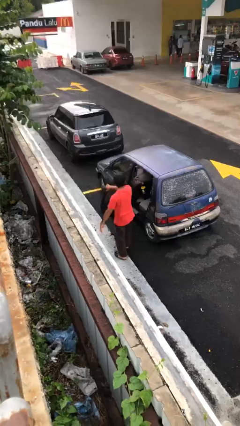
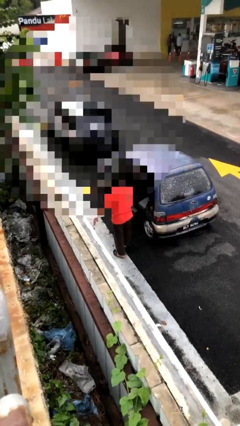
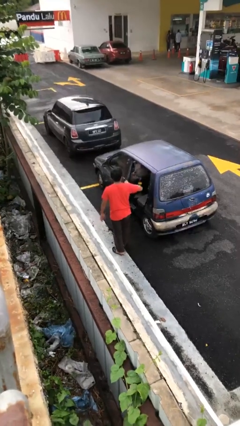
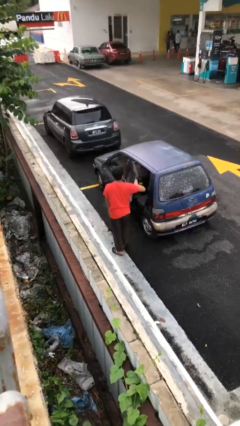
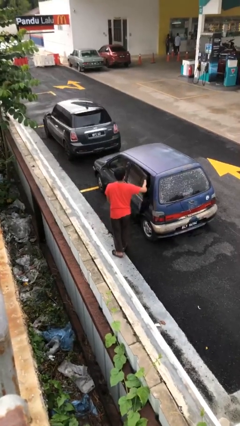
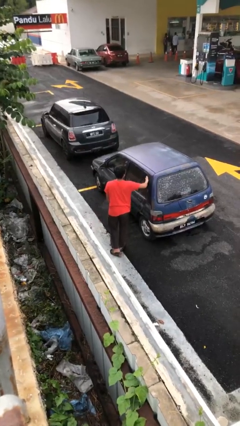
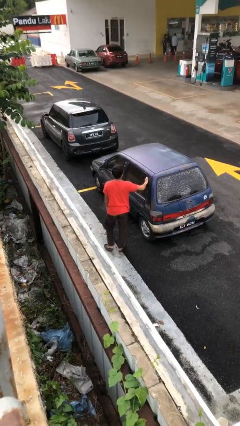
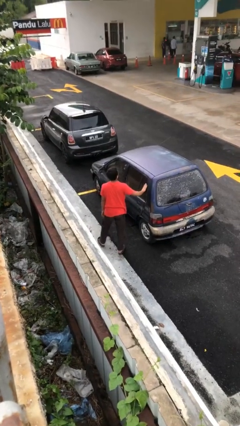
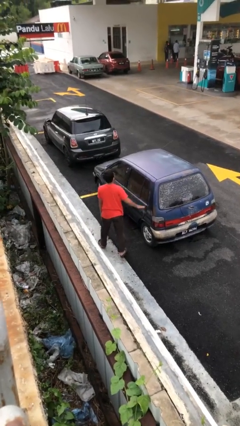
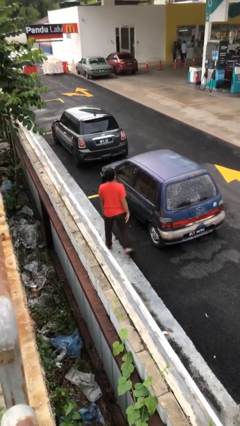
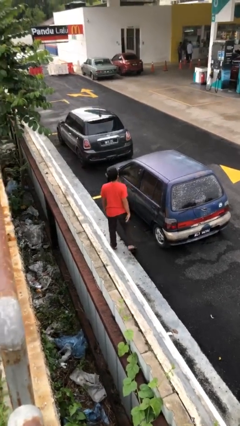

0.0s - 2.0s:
person closes car door

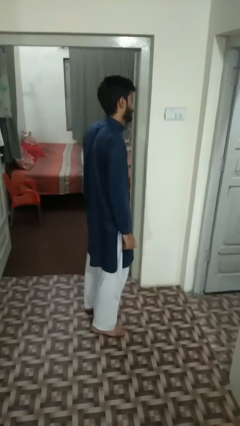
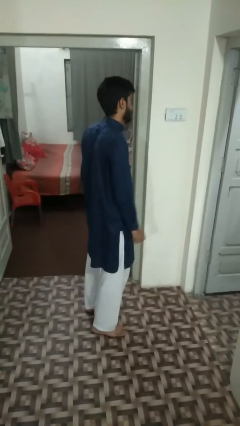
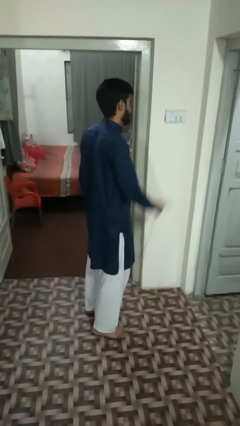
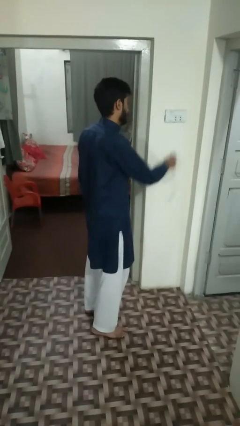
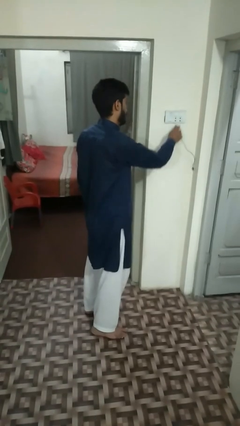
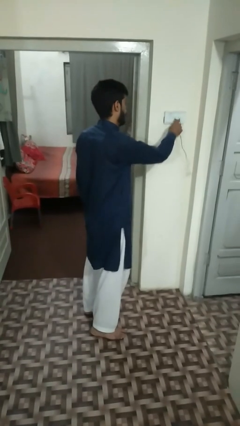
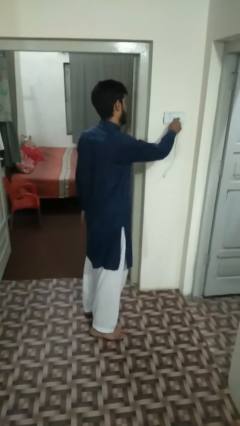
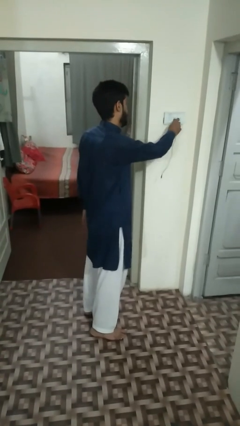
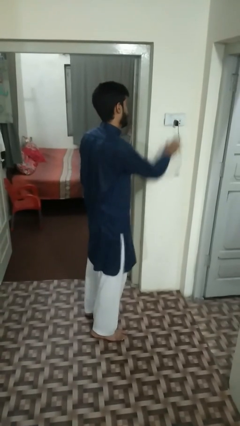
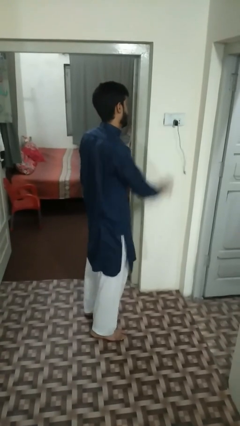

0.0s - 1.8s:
person plugs into electrical socket

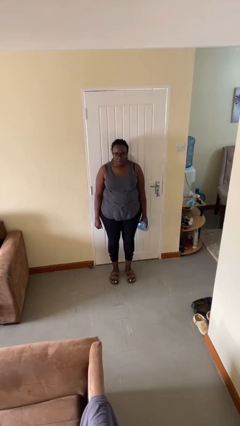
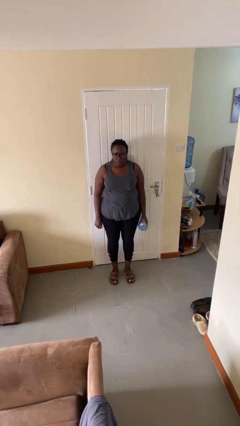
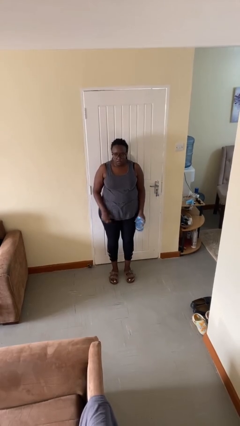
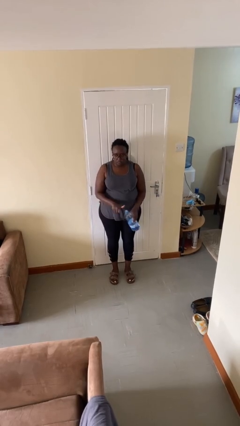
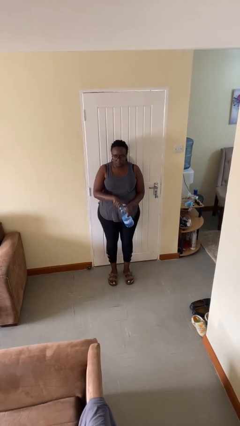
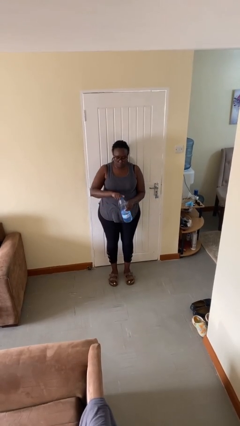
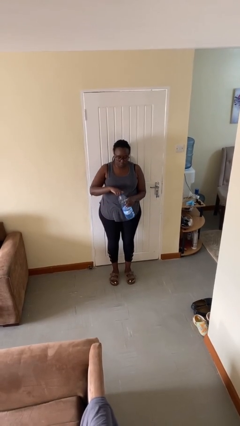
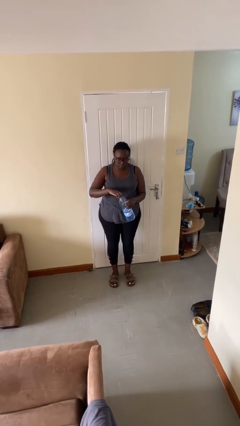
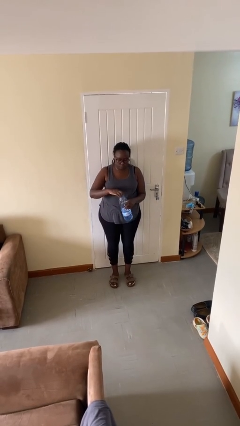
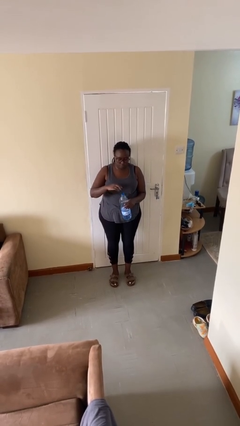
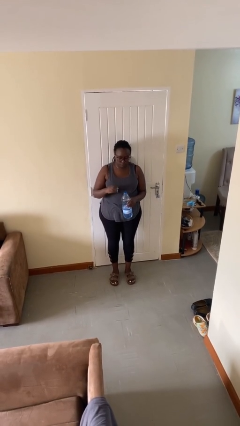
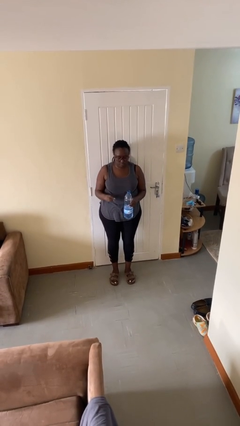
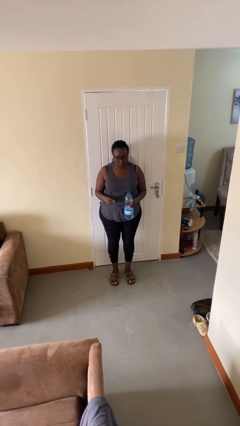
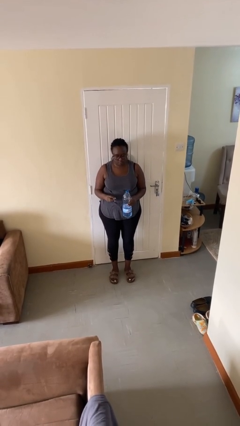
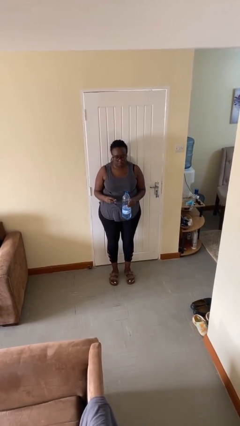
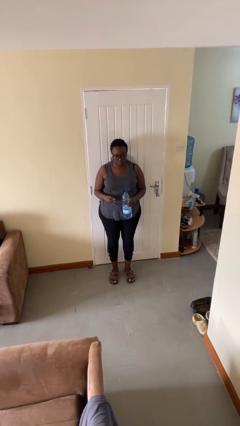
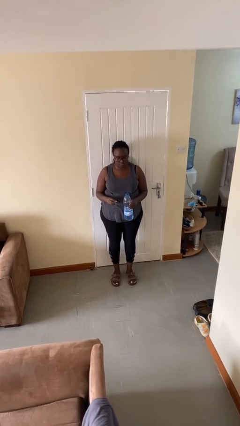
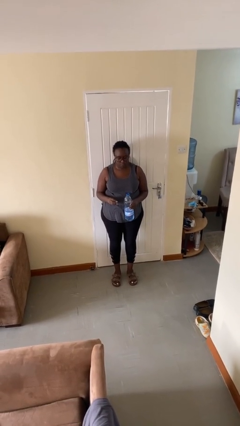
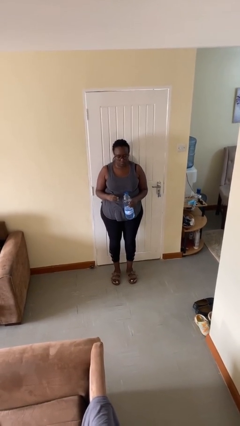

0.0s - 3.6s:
person unscrews lid from bottle

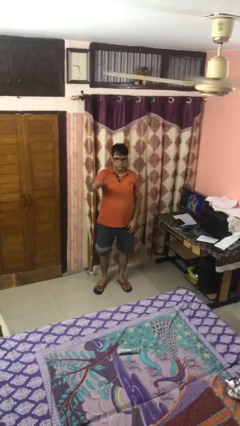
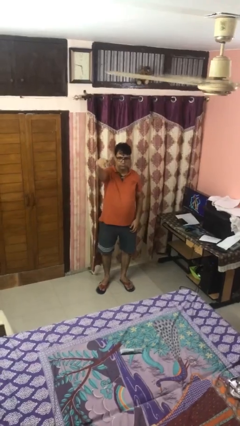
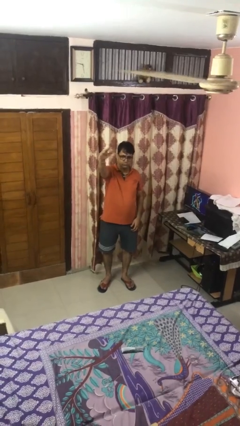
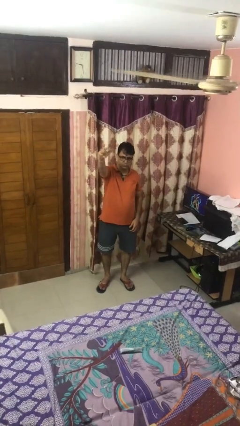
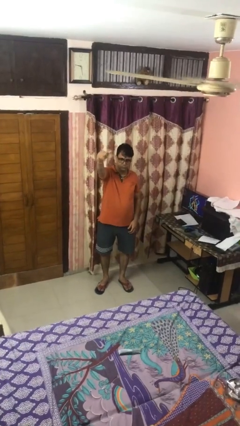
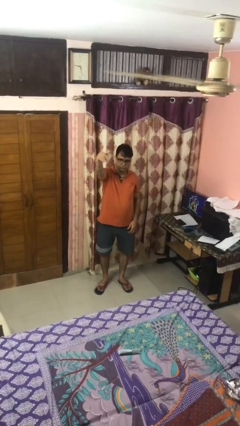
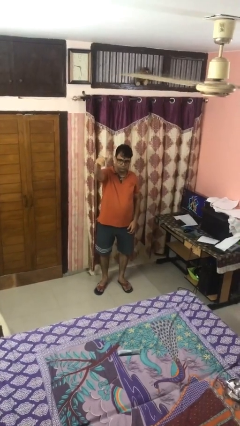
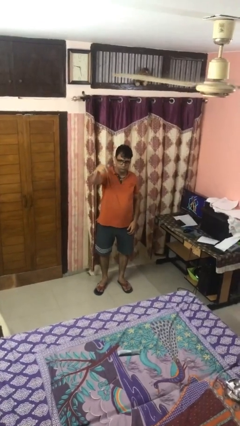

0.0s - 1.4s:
person gestures come here

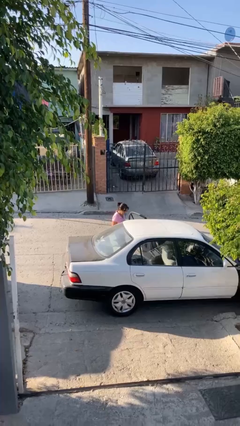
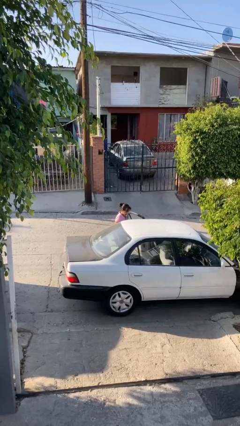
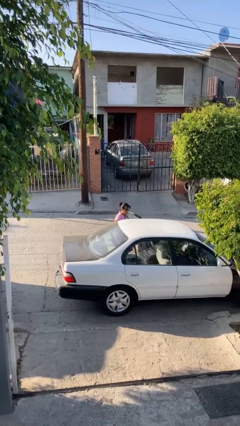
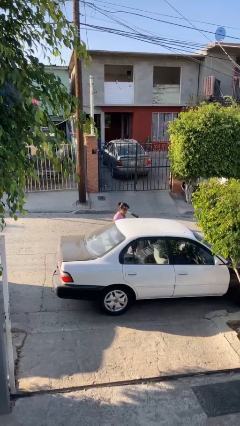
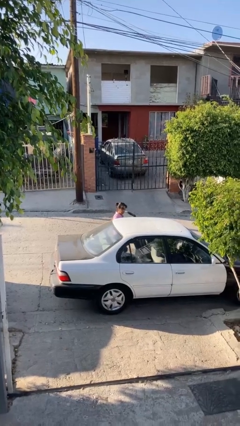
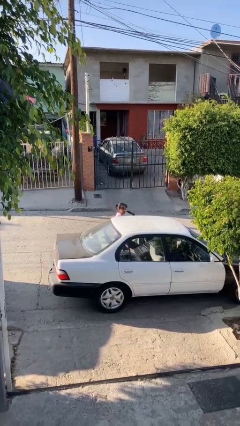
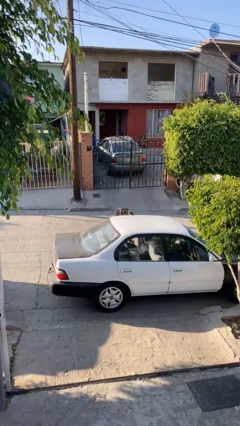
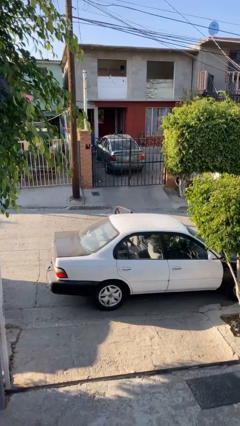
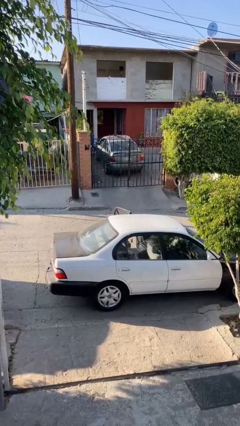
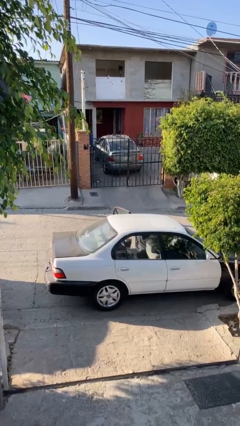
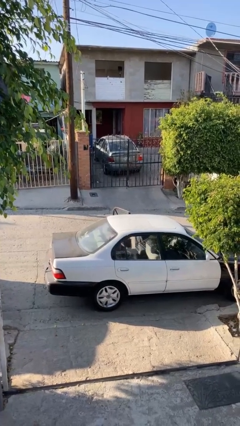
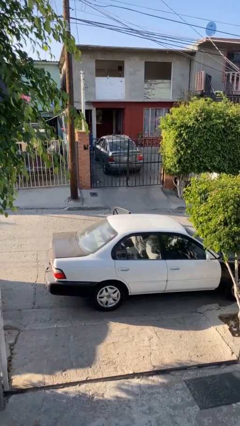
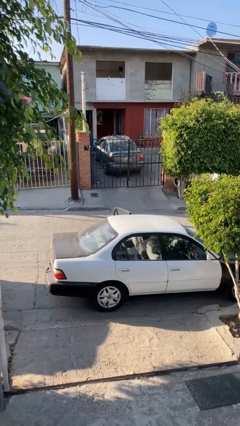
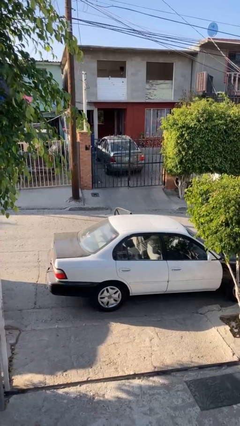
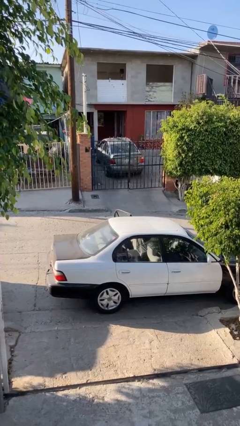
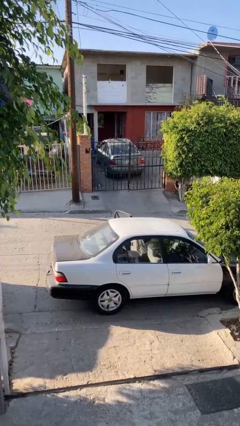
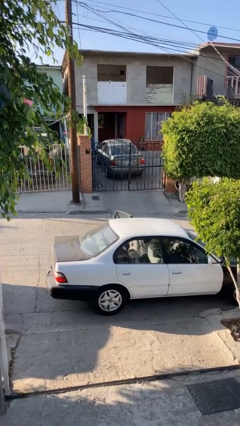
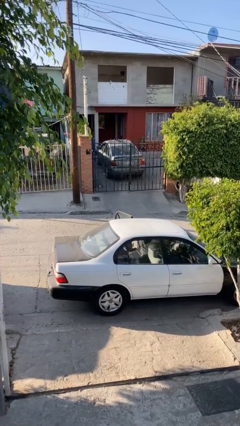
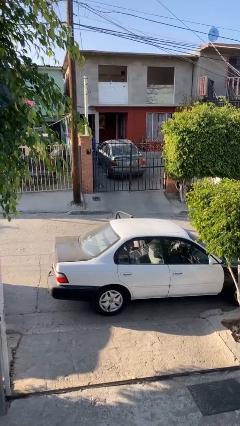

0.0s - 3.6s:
person enters car

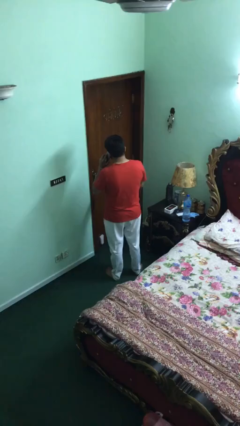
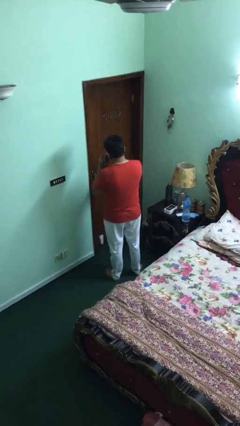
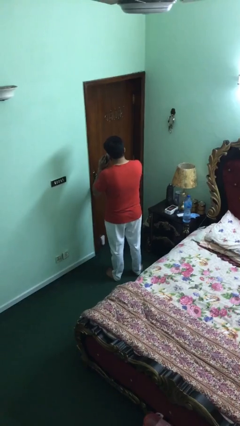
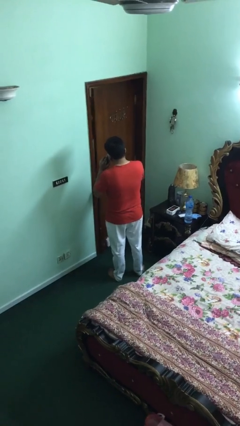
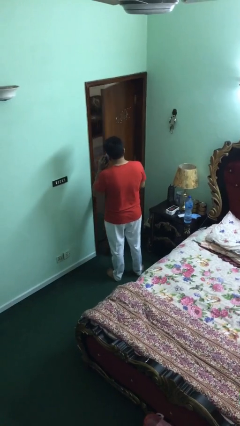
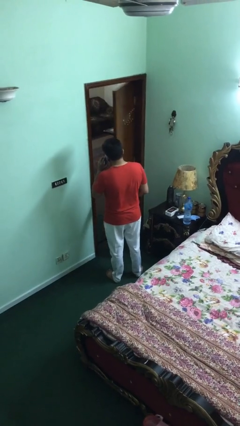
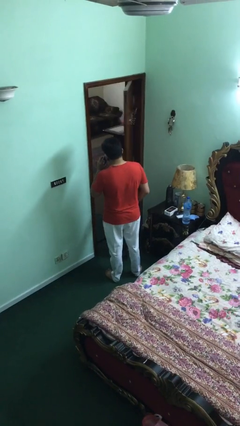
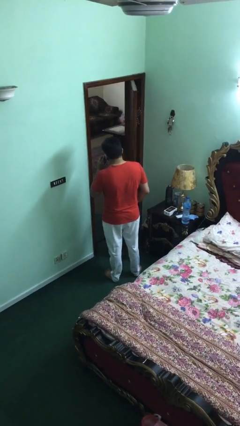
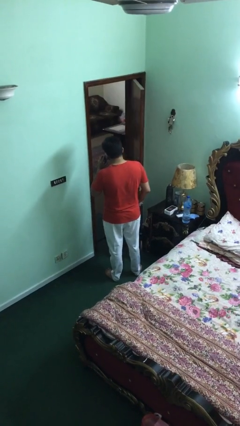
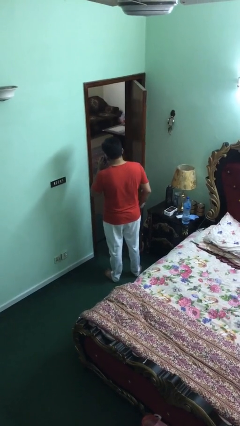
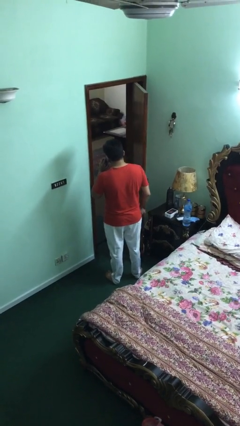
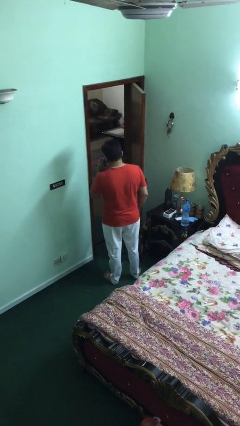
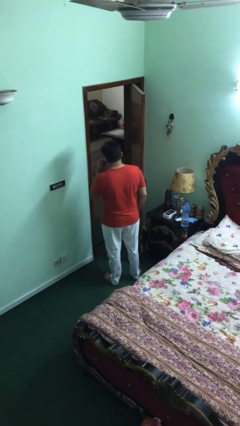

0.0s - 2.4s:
person opens facility door

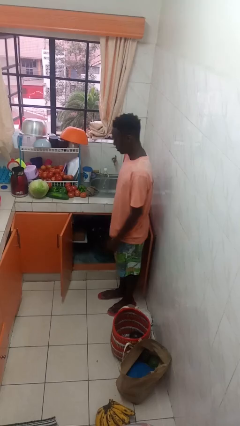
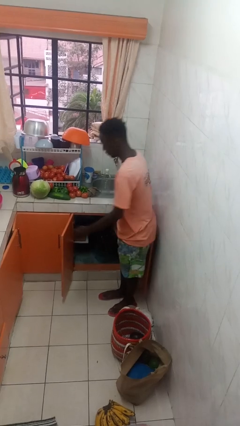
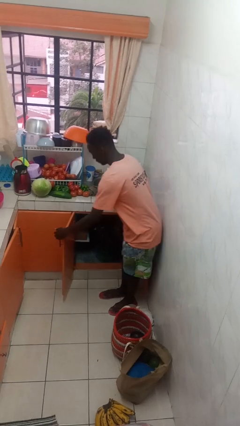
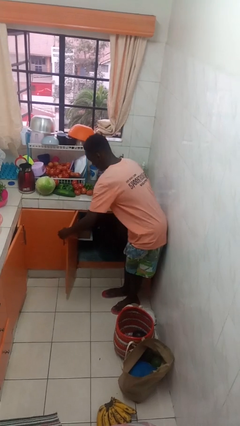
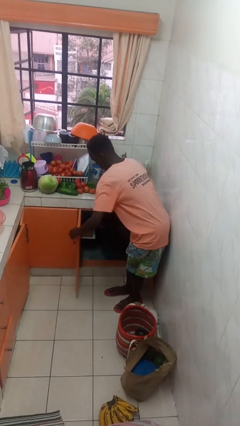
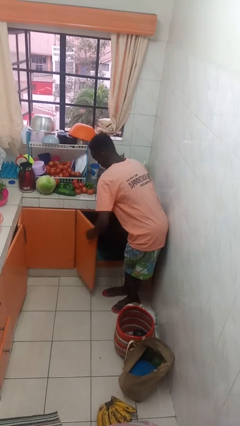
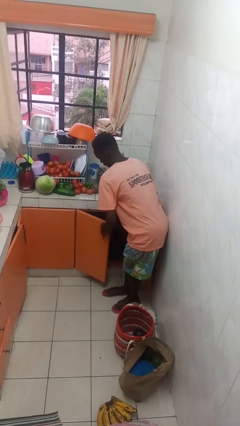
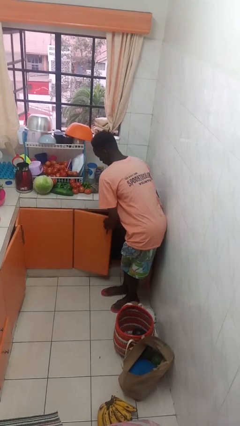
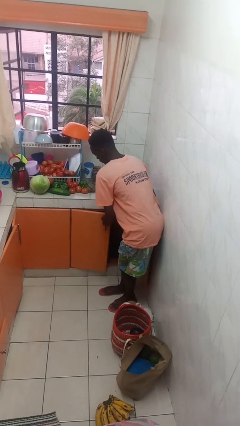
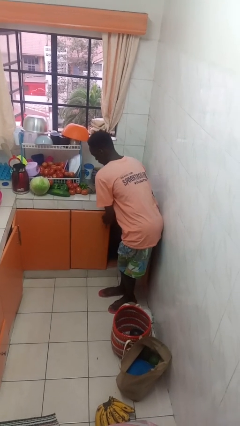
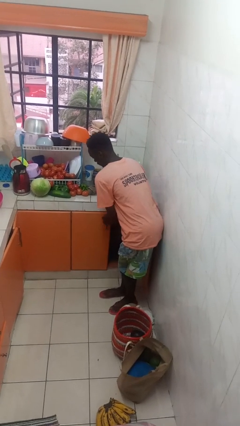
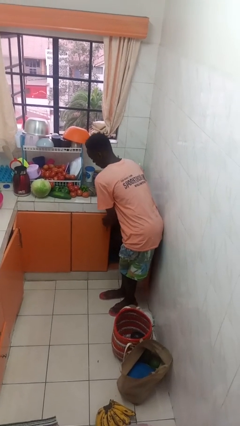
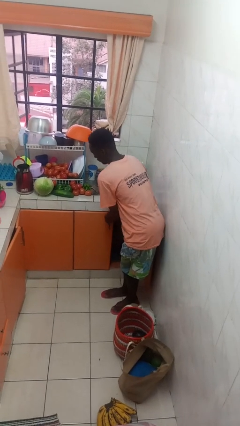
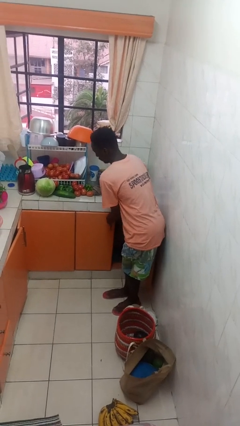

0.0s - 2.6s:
person closes cabinet
